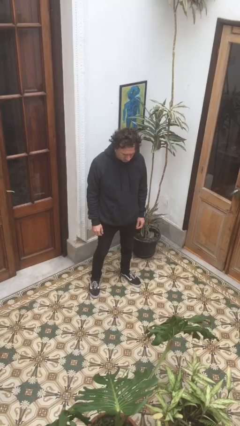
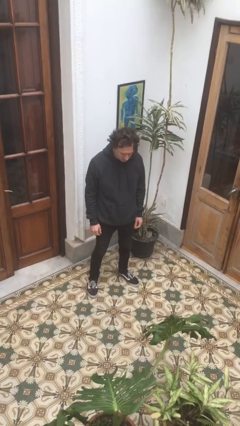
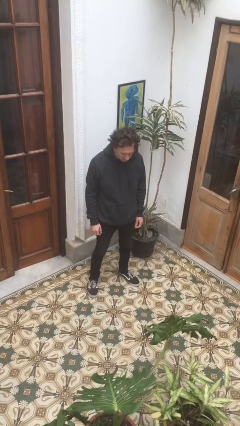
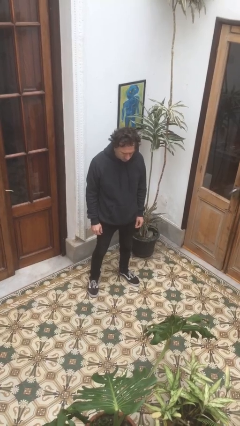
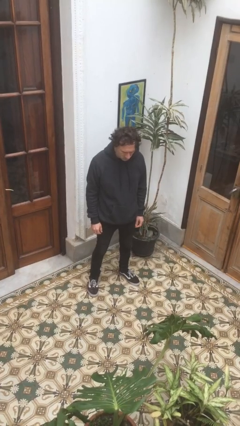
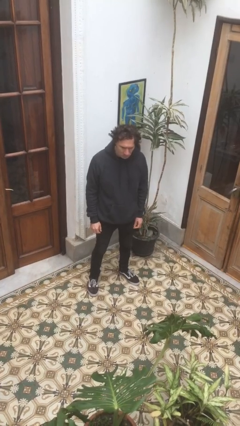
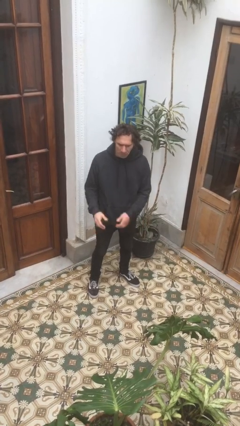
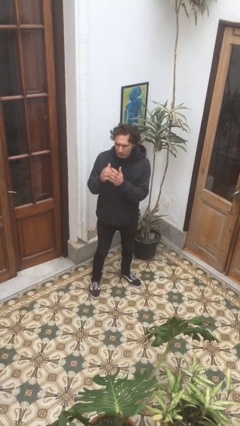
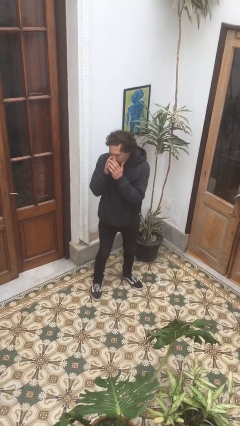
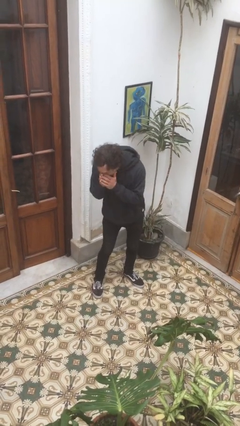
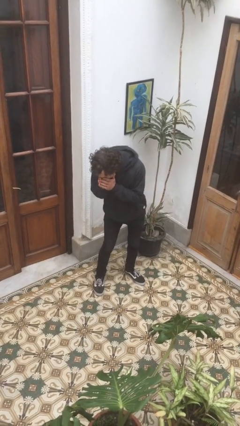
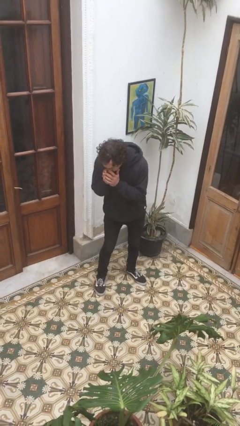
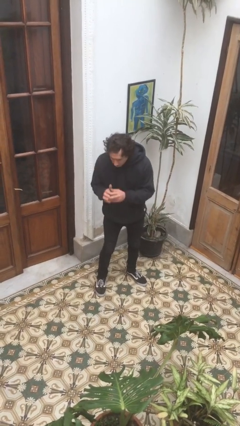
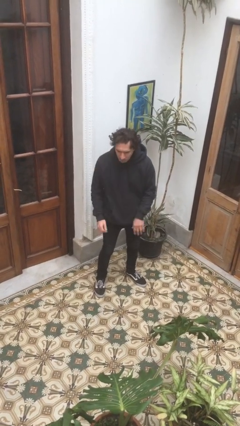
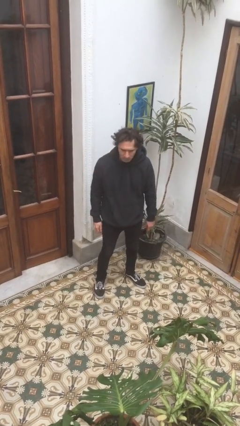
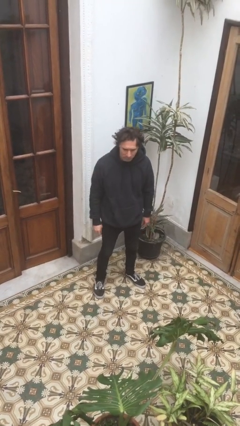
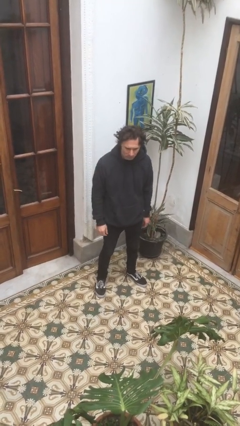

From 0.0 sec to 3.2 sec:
person sneezes into hand

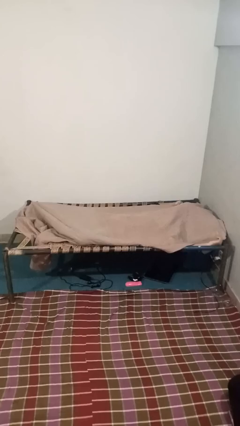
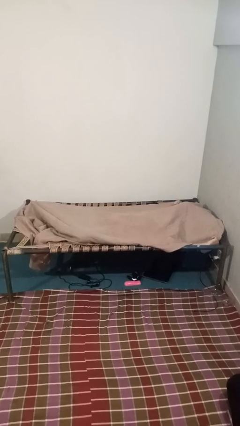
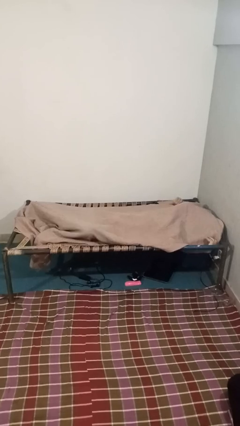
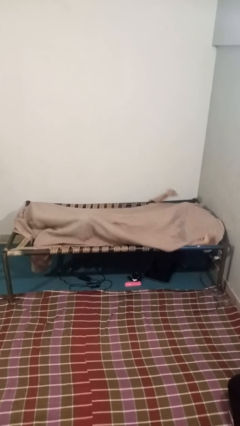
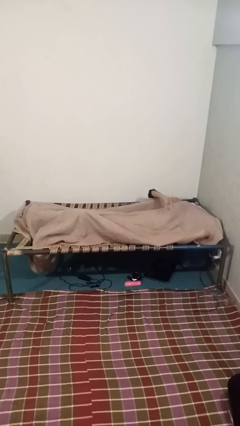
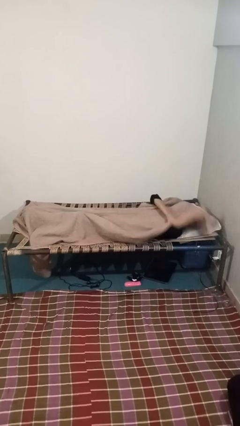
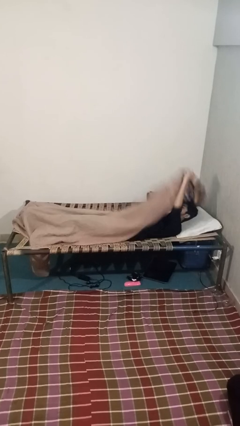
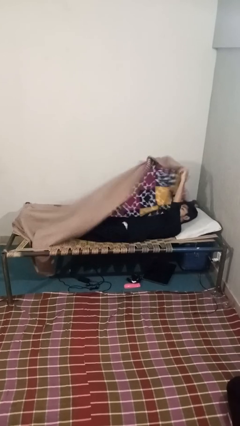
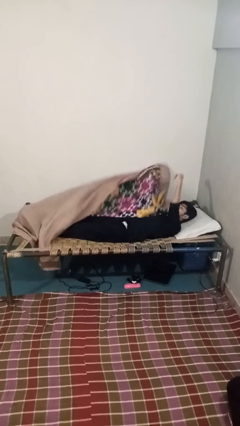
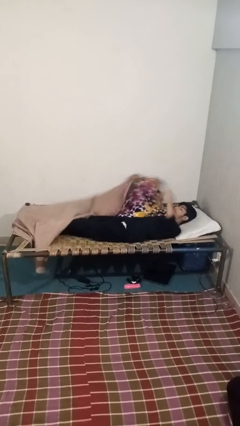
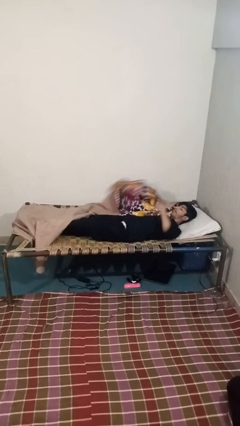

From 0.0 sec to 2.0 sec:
person uncovers with blanket

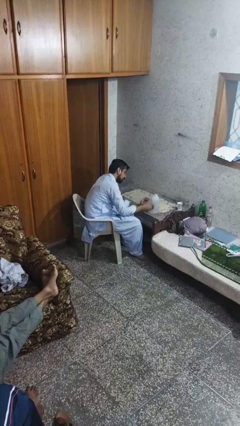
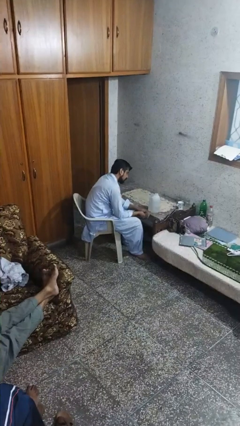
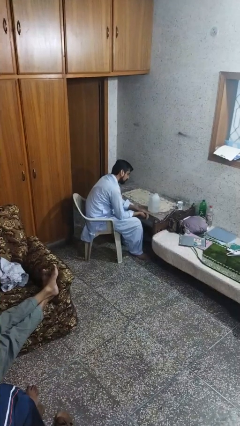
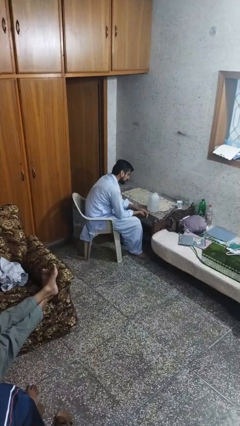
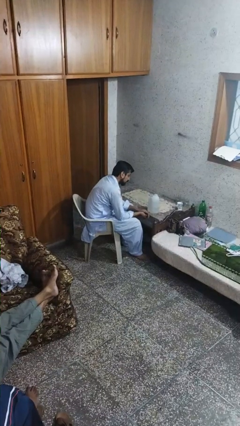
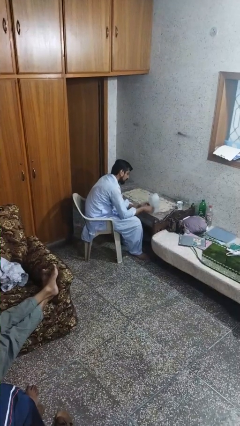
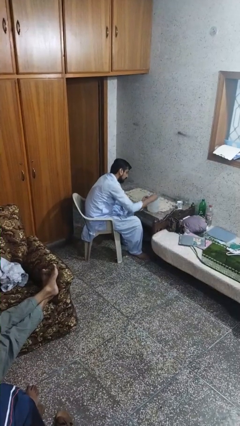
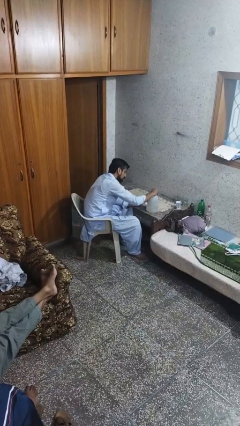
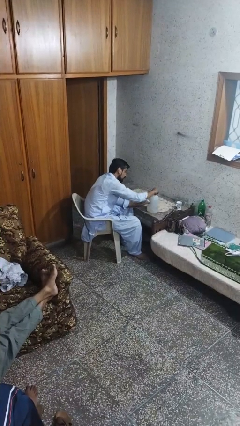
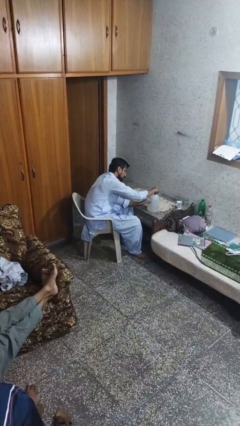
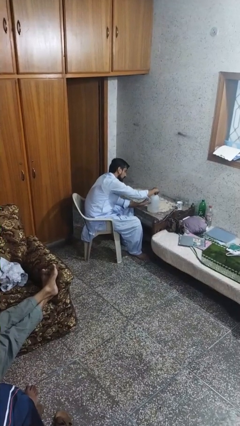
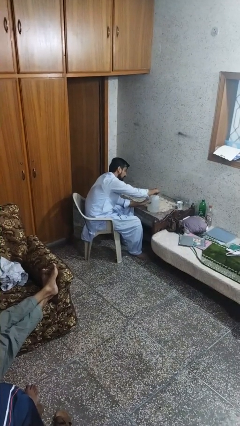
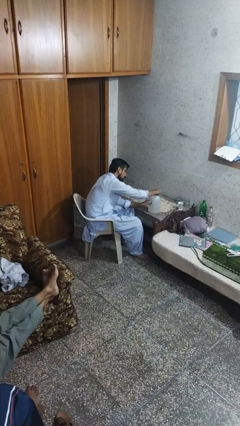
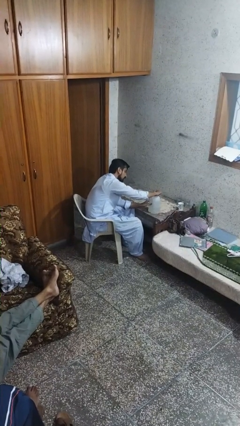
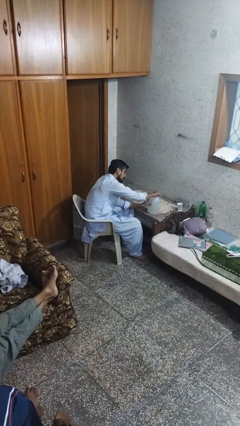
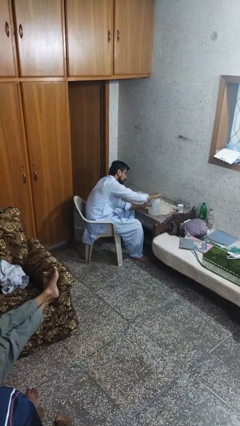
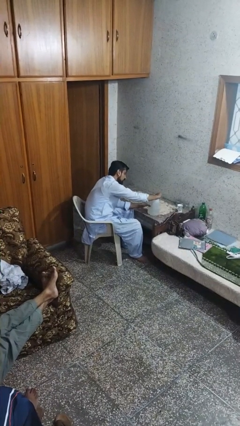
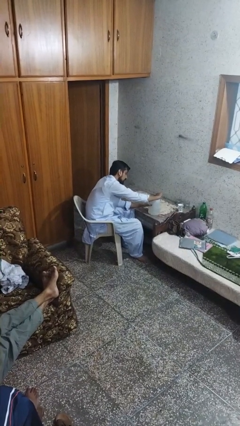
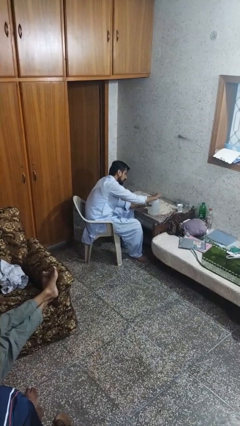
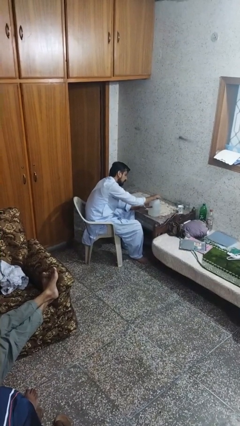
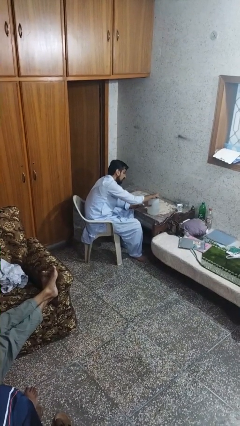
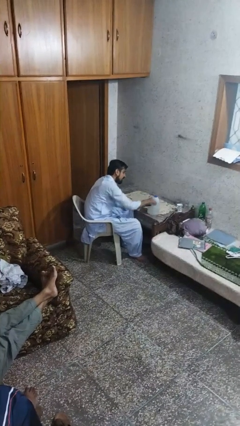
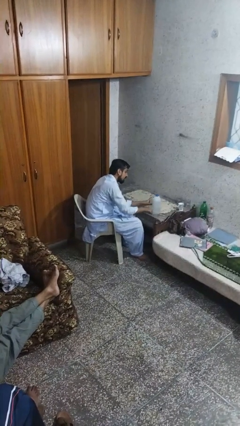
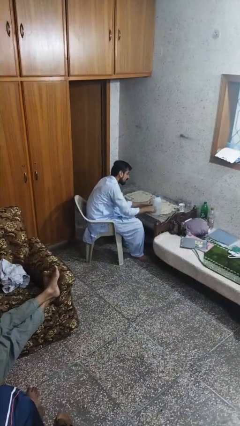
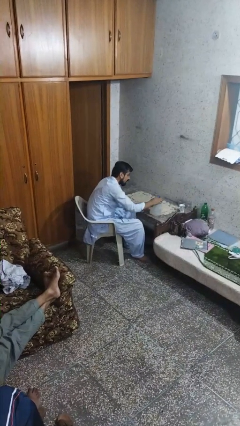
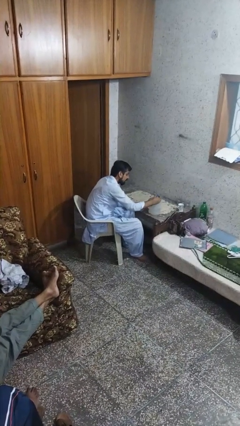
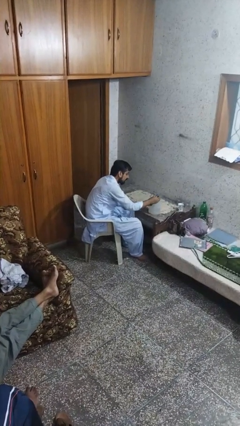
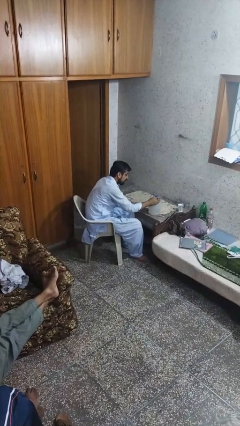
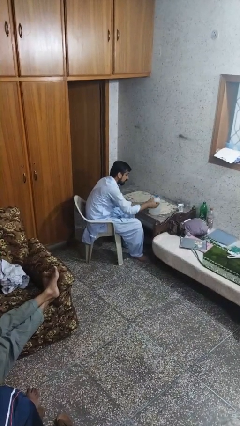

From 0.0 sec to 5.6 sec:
person screws lid to bottle

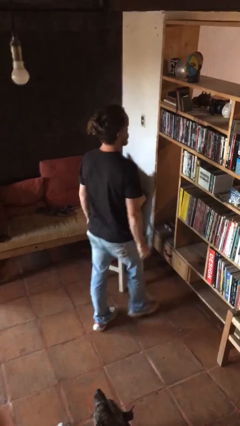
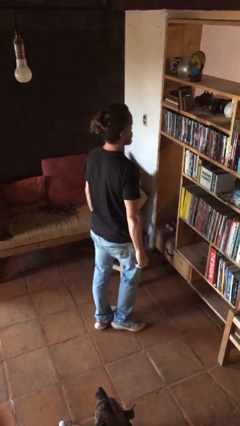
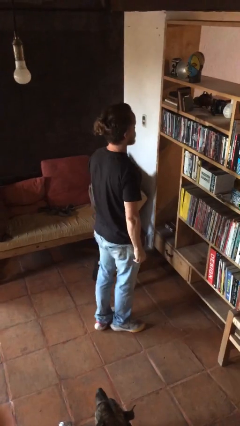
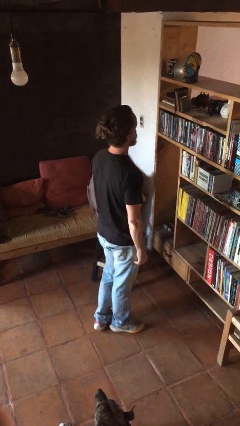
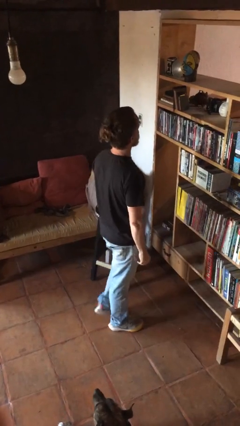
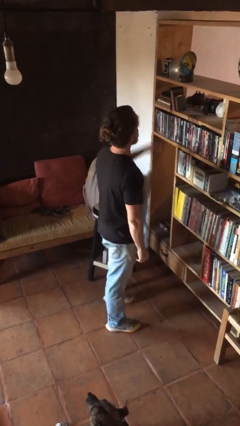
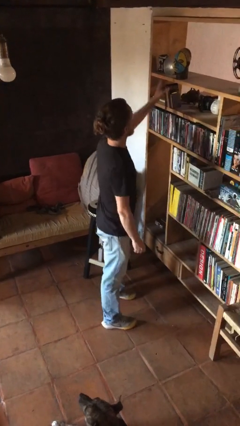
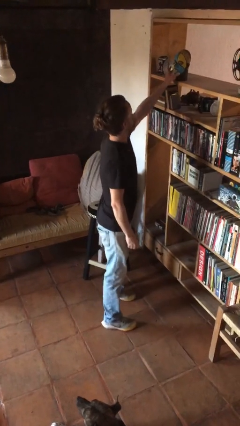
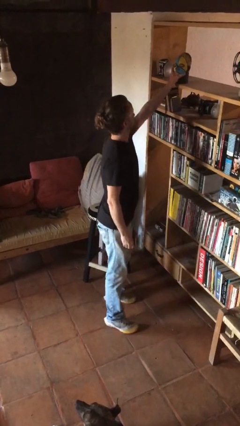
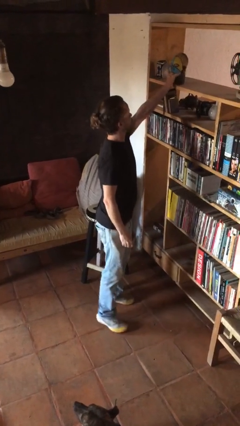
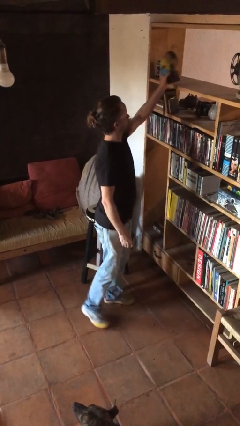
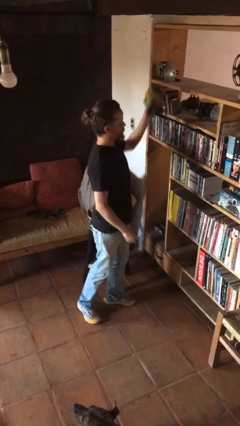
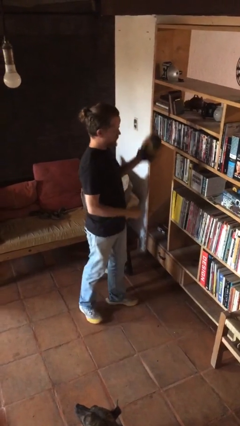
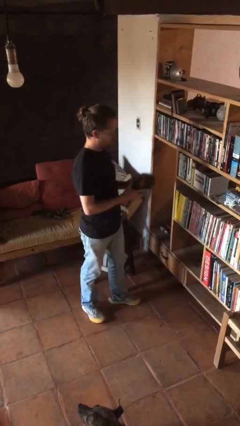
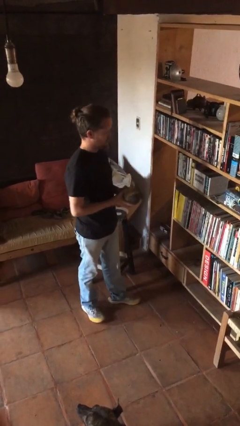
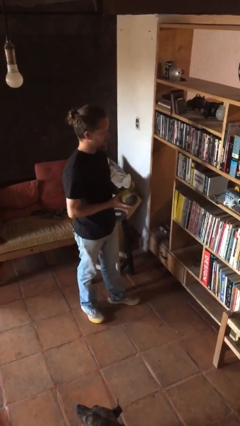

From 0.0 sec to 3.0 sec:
person picks up object from countertop

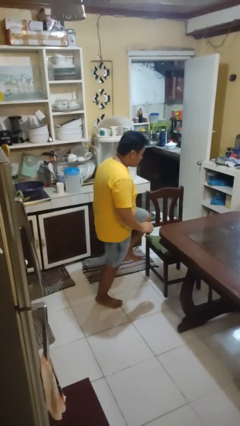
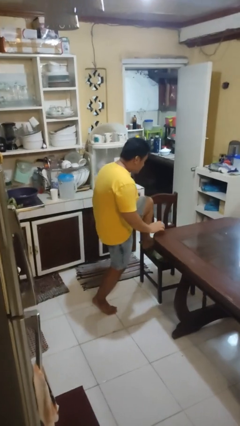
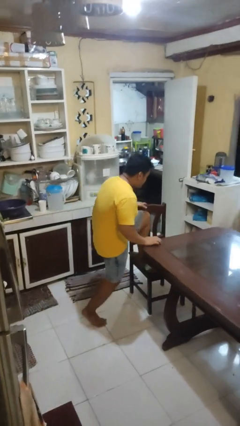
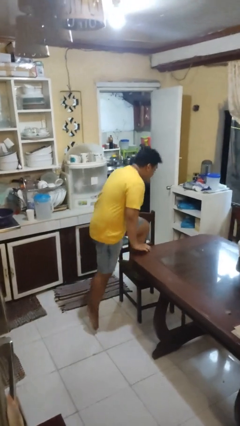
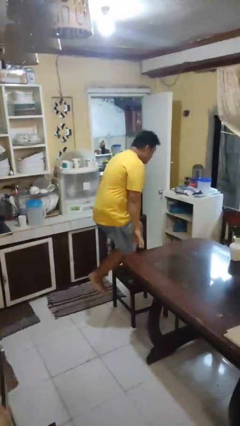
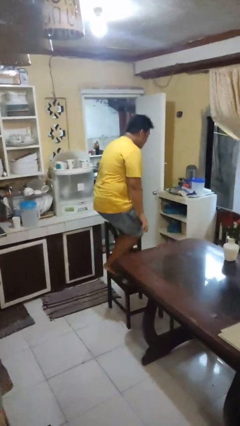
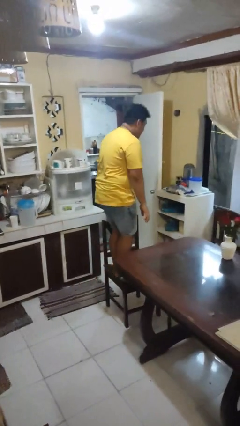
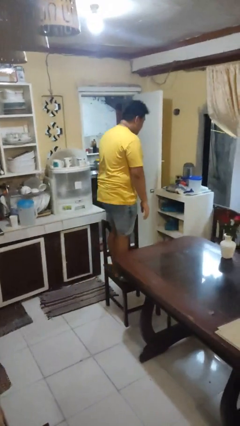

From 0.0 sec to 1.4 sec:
person climbs on chair

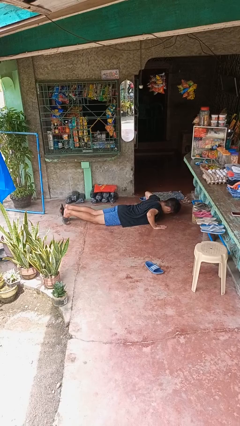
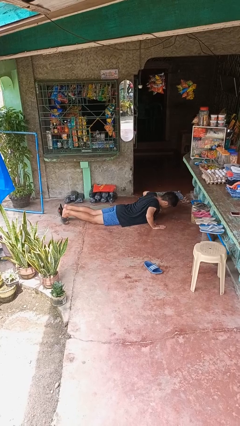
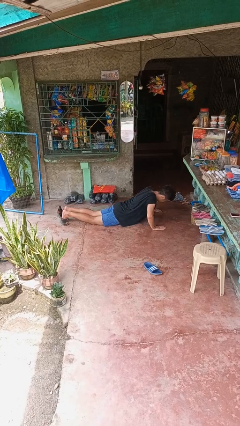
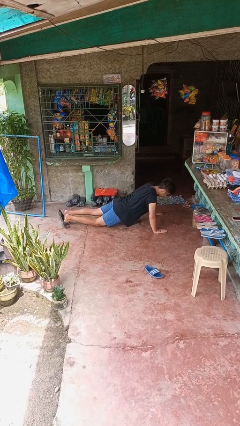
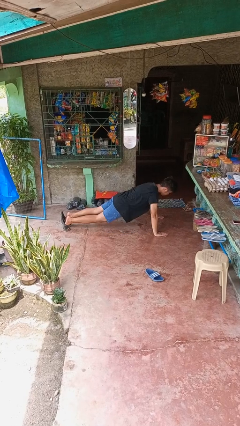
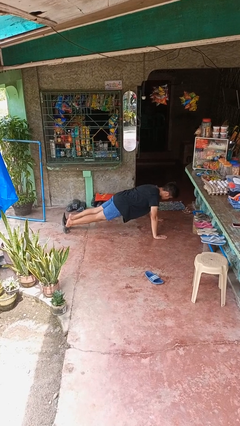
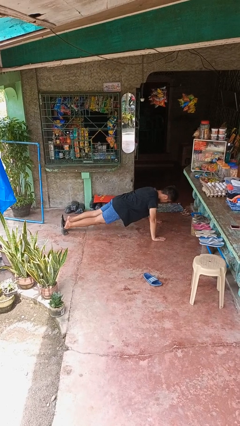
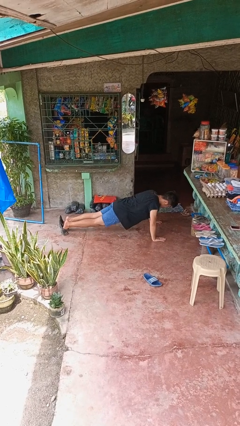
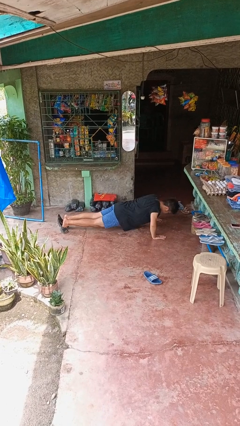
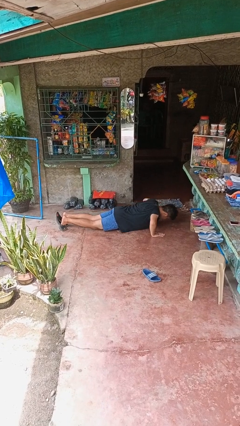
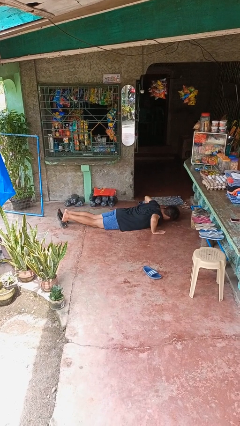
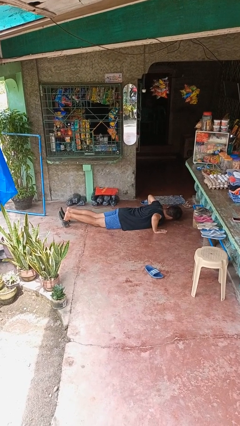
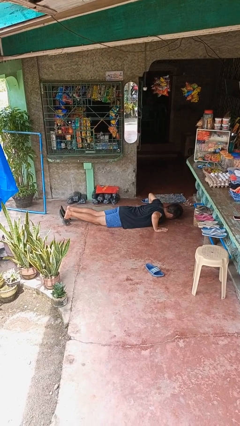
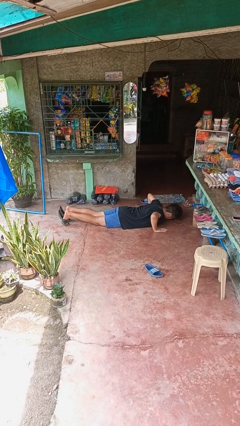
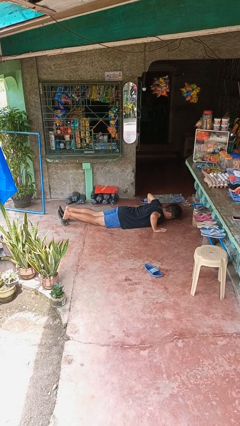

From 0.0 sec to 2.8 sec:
person exercises with pushup
